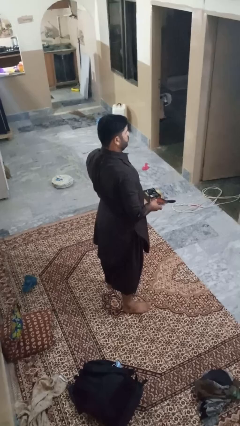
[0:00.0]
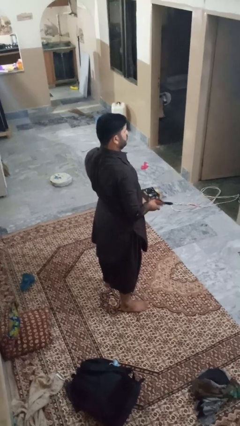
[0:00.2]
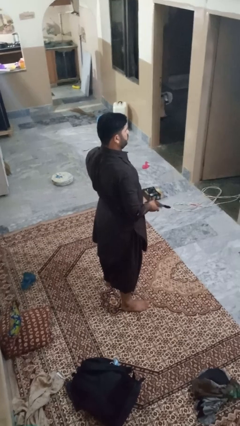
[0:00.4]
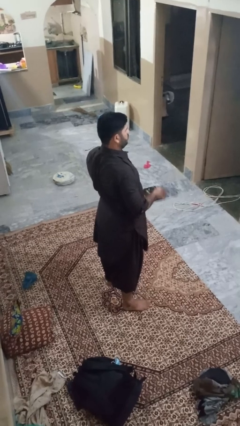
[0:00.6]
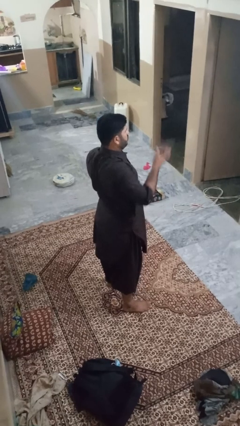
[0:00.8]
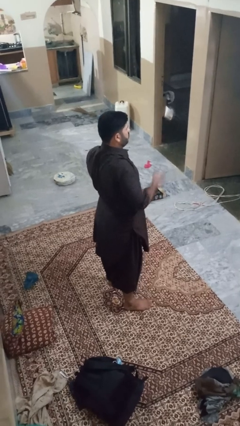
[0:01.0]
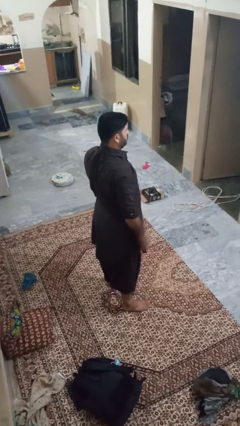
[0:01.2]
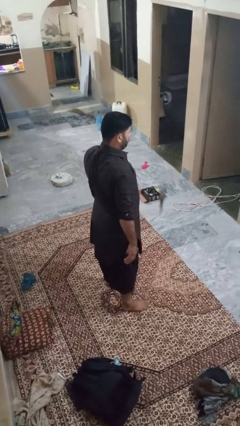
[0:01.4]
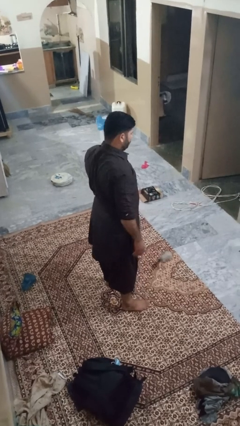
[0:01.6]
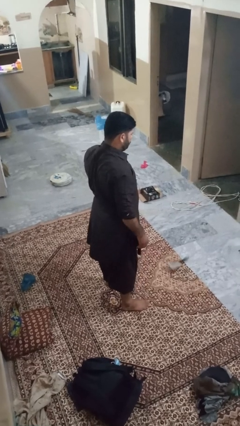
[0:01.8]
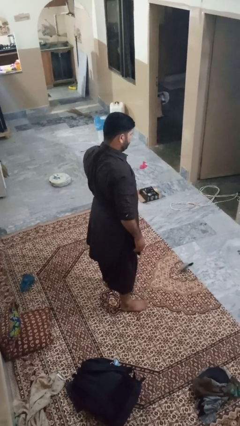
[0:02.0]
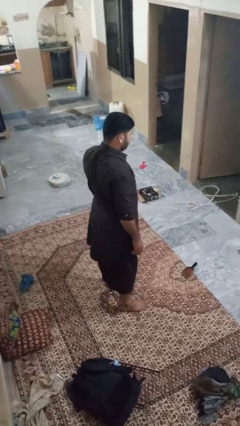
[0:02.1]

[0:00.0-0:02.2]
person throws object into air

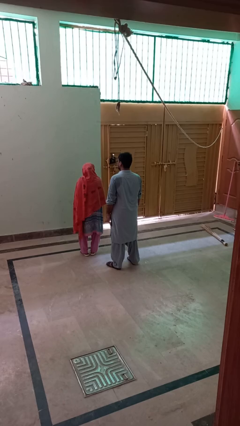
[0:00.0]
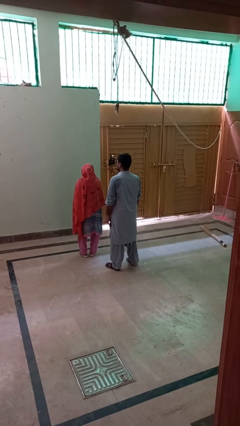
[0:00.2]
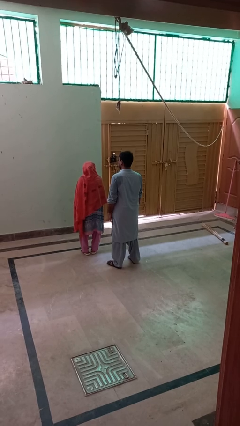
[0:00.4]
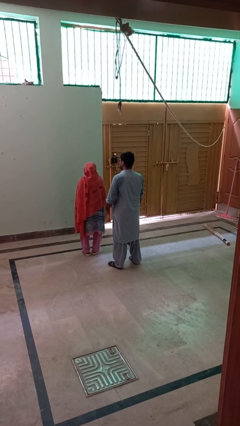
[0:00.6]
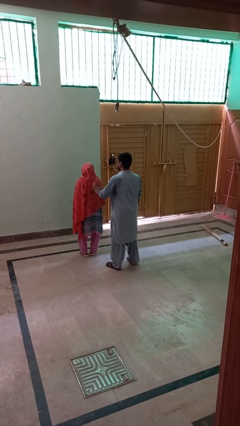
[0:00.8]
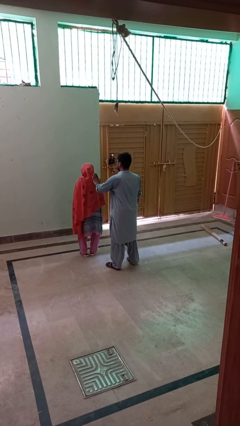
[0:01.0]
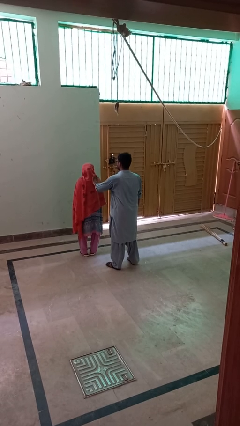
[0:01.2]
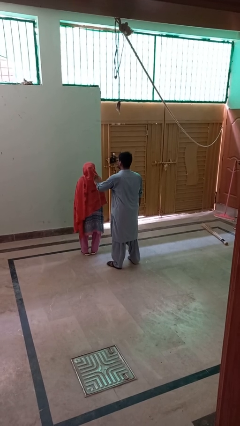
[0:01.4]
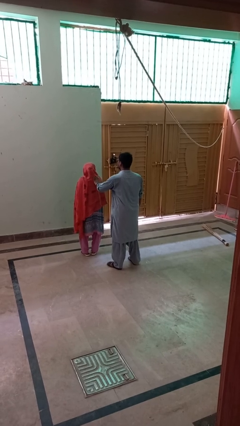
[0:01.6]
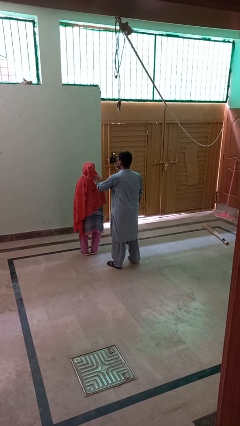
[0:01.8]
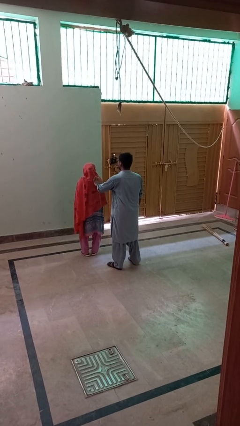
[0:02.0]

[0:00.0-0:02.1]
person touches back of person

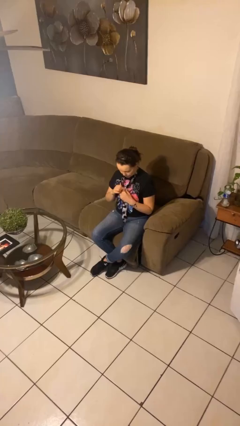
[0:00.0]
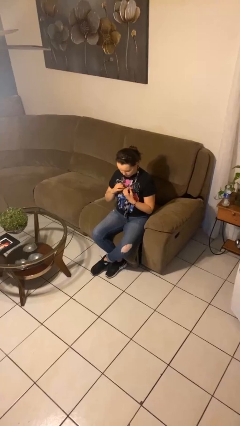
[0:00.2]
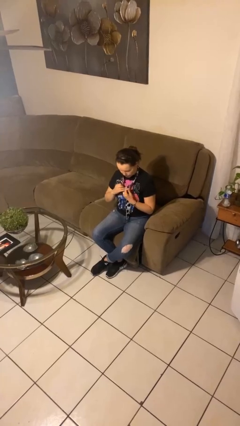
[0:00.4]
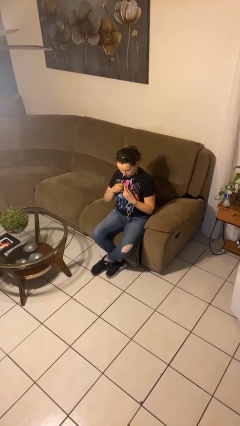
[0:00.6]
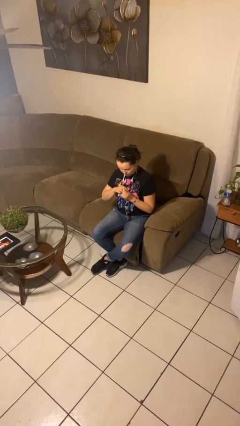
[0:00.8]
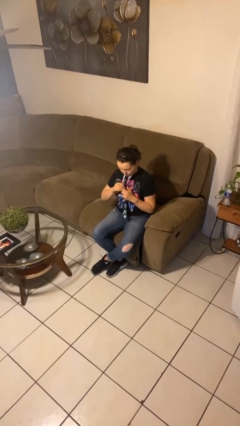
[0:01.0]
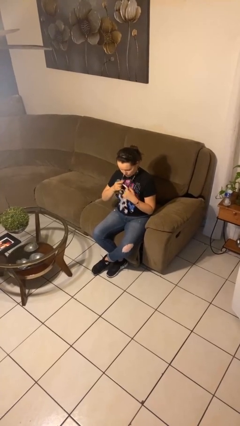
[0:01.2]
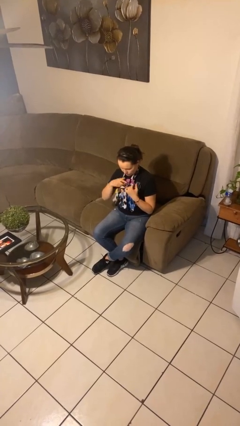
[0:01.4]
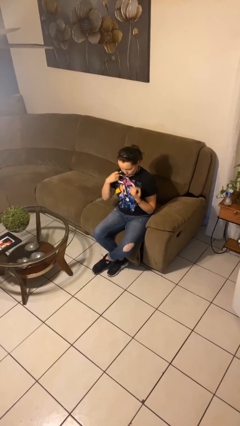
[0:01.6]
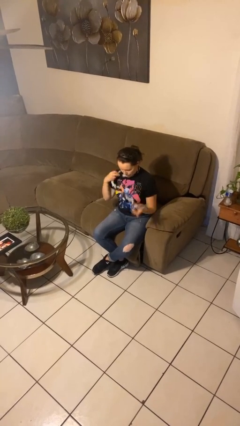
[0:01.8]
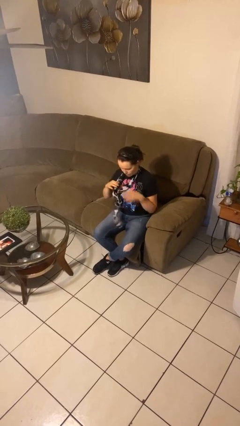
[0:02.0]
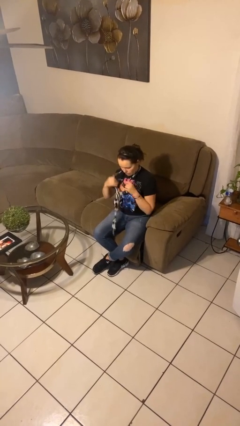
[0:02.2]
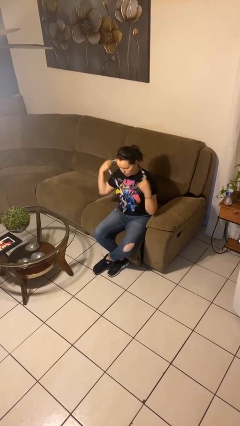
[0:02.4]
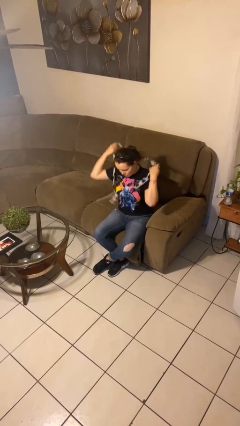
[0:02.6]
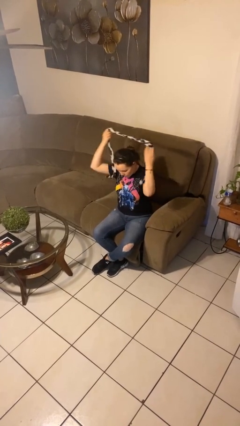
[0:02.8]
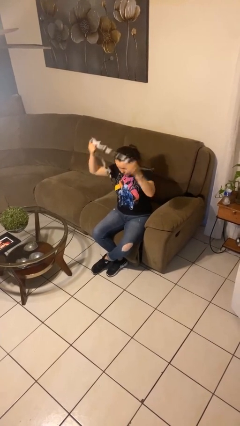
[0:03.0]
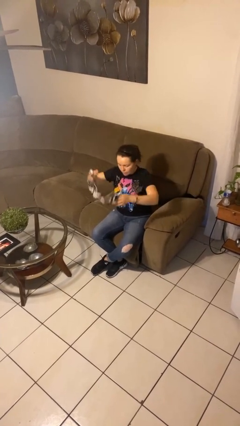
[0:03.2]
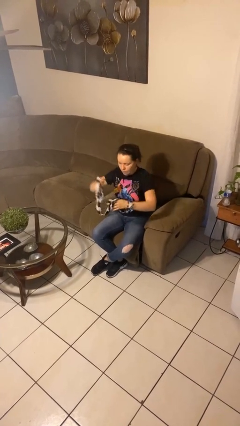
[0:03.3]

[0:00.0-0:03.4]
person takes off necktie

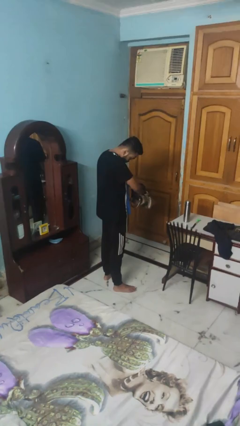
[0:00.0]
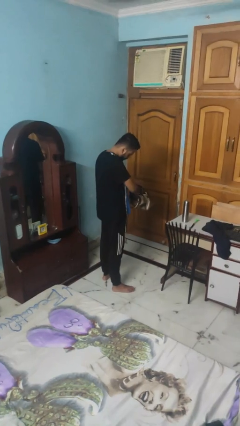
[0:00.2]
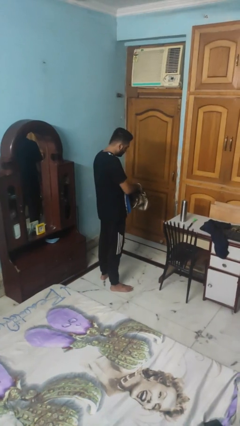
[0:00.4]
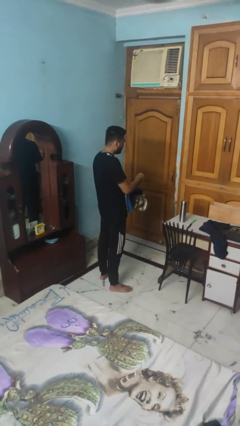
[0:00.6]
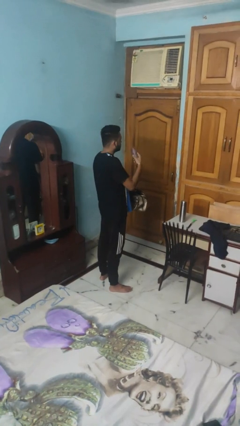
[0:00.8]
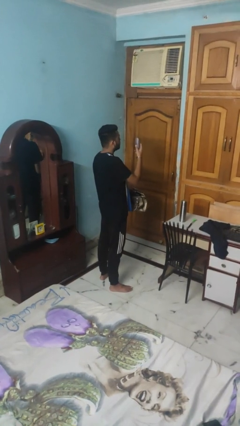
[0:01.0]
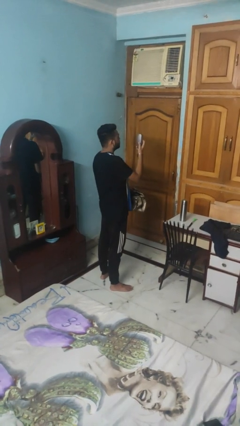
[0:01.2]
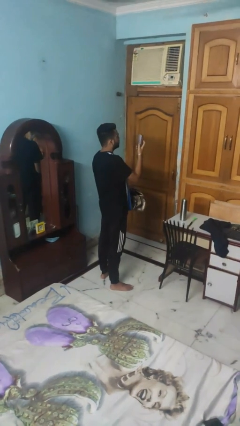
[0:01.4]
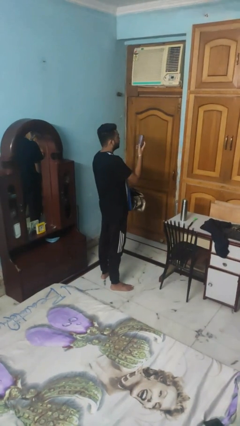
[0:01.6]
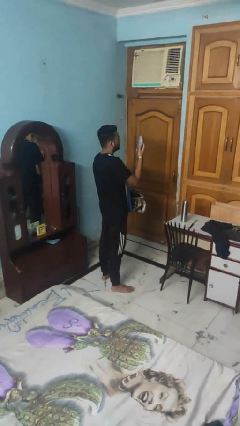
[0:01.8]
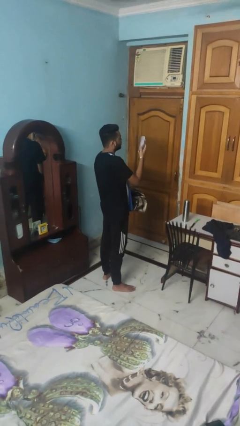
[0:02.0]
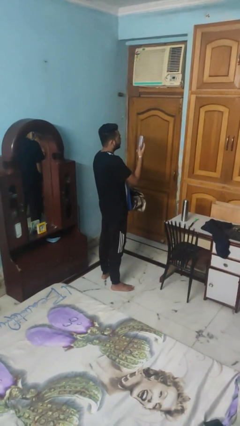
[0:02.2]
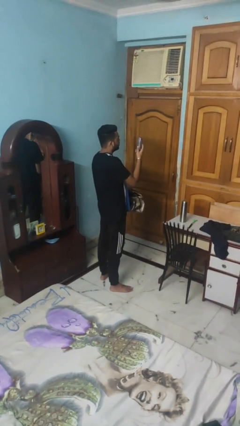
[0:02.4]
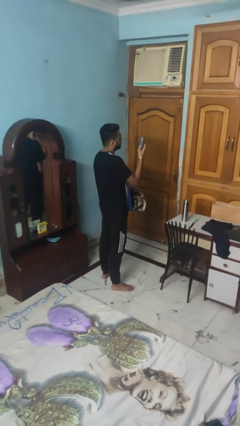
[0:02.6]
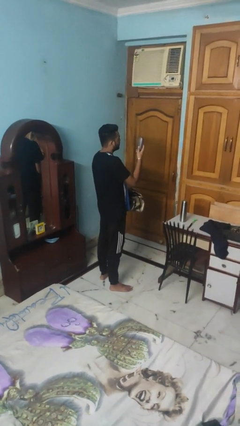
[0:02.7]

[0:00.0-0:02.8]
person takes object from purse

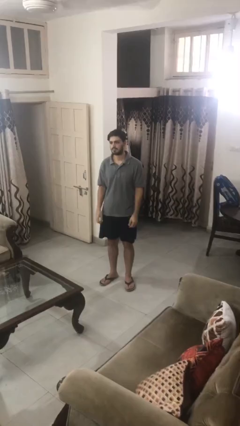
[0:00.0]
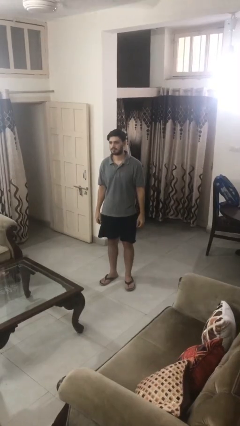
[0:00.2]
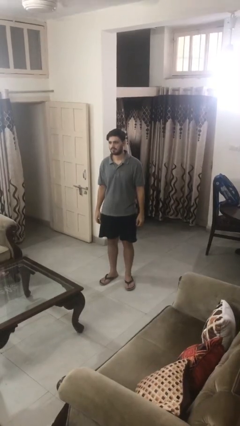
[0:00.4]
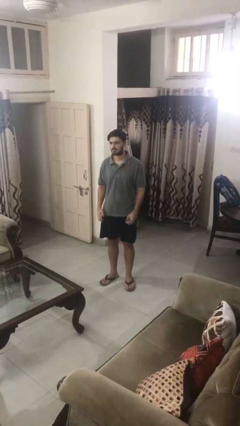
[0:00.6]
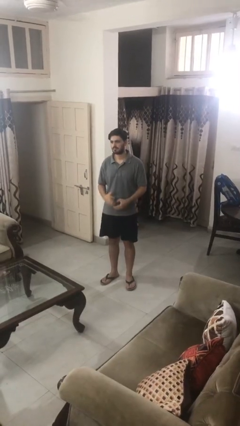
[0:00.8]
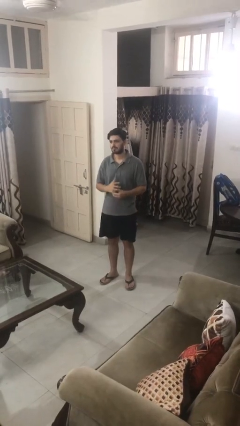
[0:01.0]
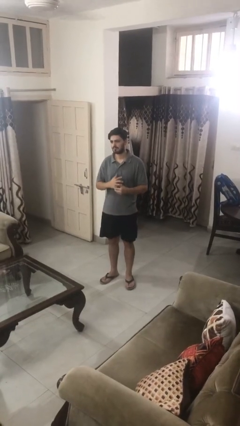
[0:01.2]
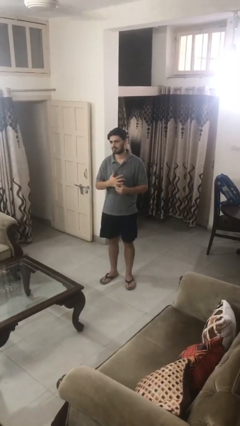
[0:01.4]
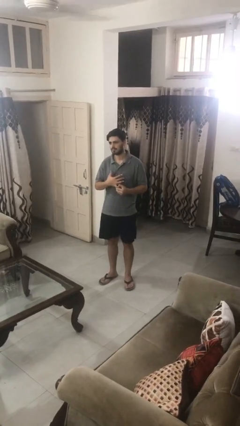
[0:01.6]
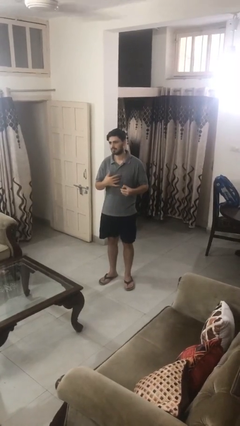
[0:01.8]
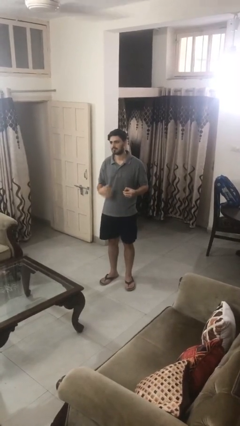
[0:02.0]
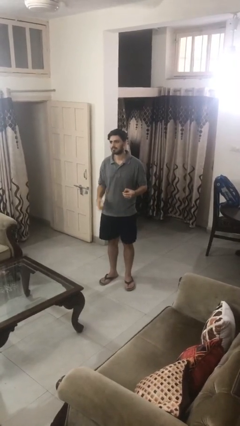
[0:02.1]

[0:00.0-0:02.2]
person takes off ring

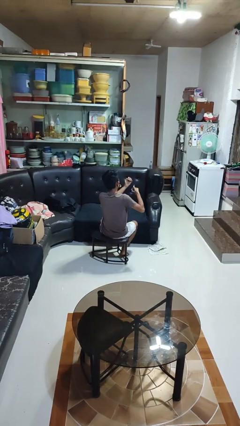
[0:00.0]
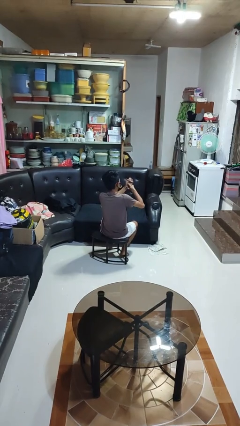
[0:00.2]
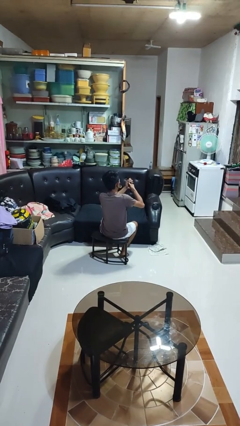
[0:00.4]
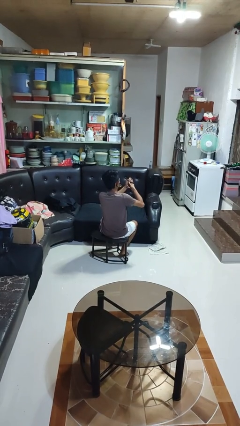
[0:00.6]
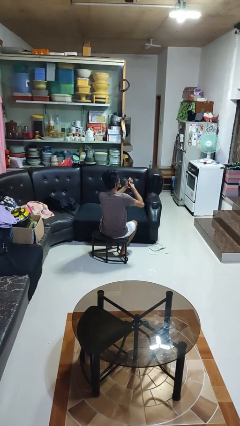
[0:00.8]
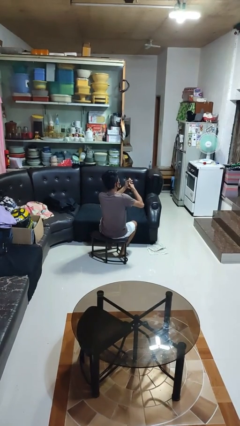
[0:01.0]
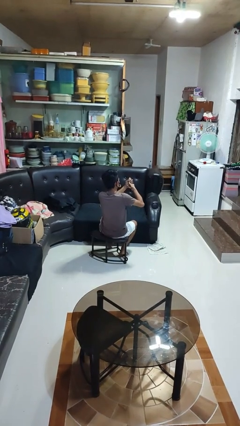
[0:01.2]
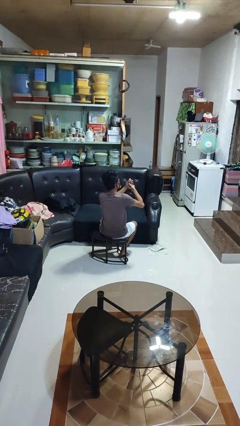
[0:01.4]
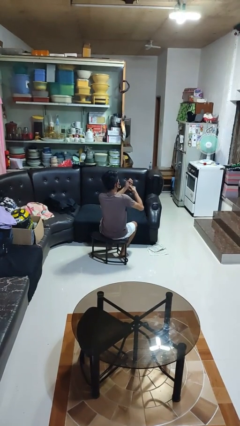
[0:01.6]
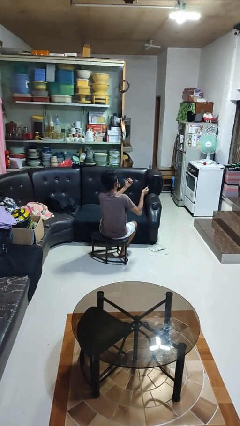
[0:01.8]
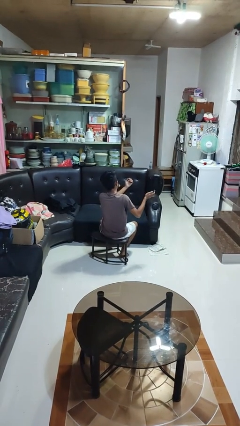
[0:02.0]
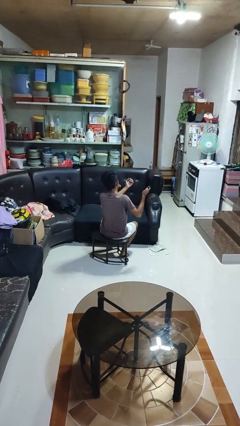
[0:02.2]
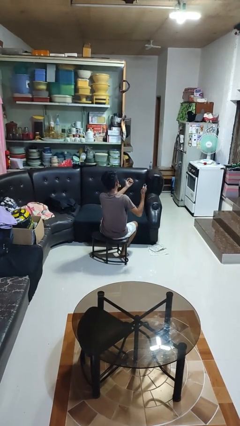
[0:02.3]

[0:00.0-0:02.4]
person clips fingernails

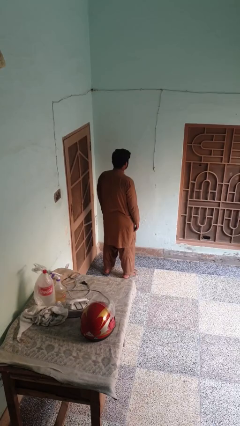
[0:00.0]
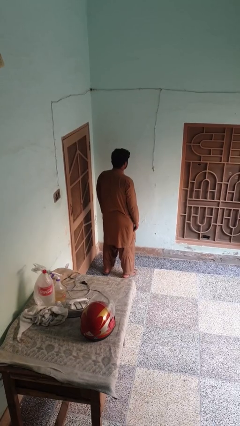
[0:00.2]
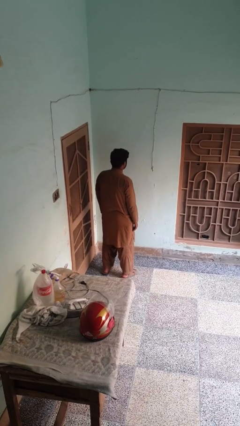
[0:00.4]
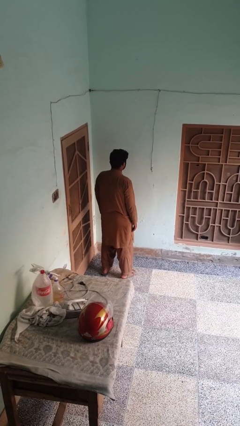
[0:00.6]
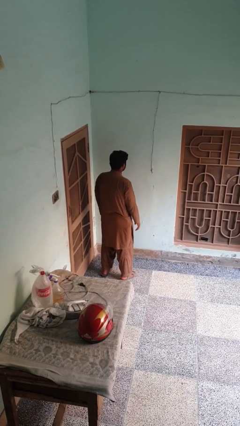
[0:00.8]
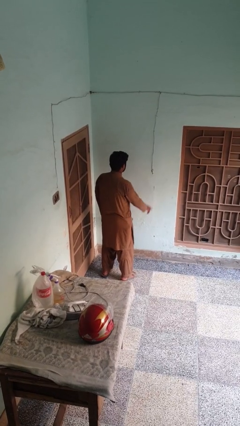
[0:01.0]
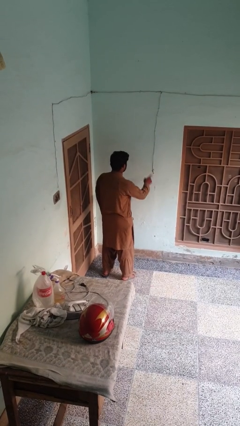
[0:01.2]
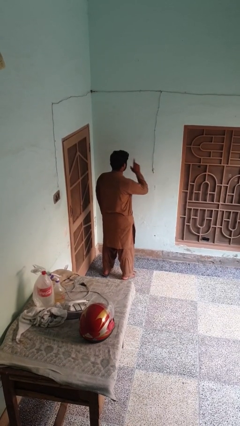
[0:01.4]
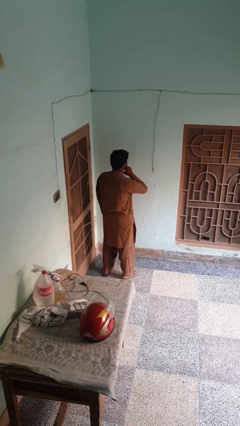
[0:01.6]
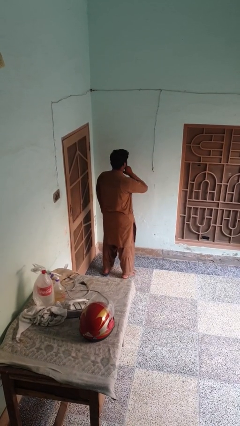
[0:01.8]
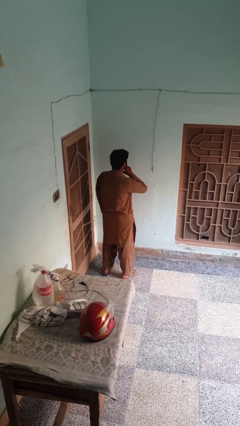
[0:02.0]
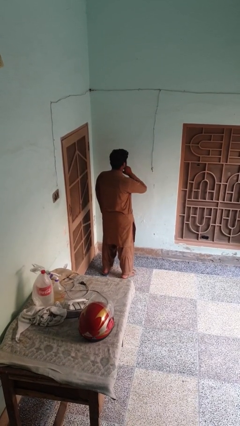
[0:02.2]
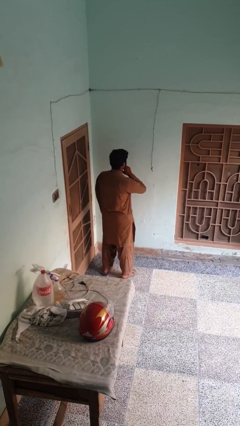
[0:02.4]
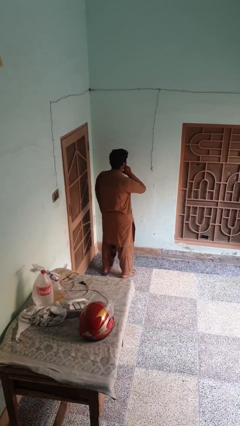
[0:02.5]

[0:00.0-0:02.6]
person gestures be quiet
